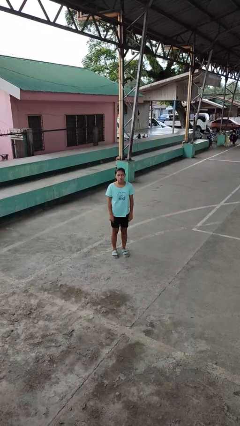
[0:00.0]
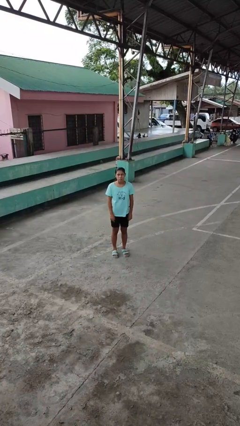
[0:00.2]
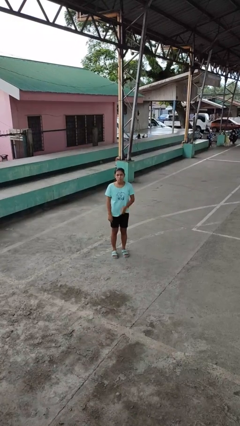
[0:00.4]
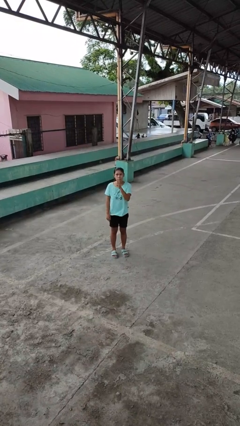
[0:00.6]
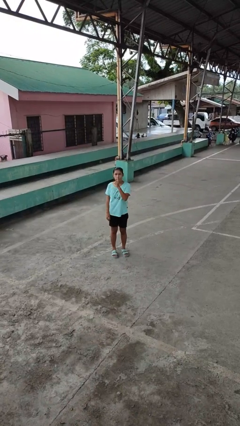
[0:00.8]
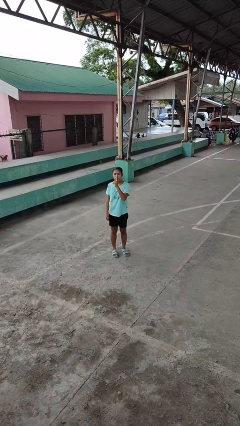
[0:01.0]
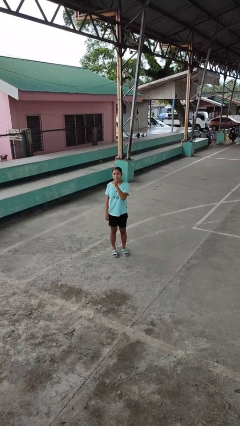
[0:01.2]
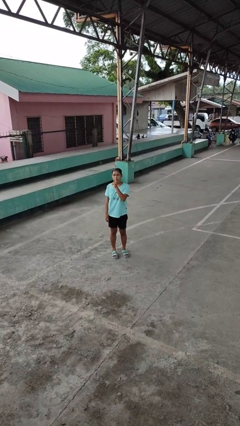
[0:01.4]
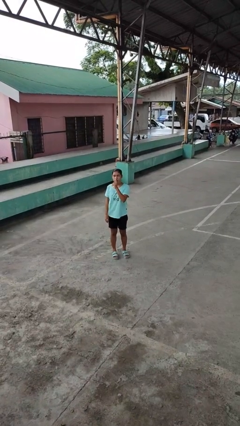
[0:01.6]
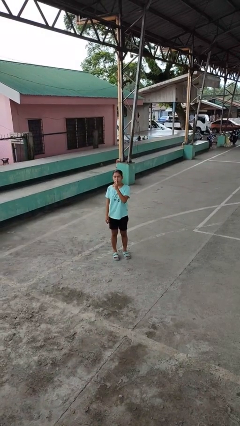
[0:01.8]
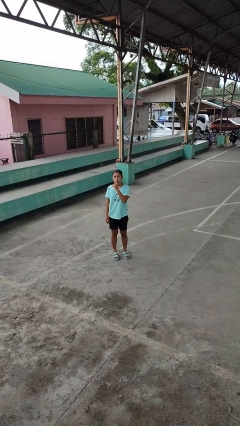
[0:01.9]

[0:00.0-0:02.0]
person gestures be quiet

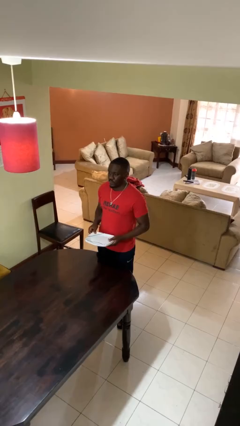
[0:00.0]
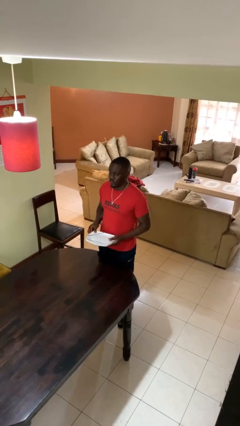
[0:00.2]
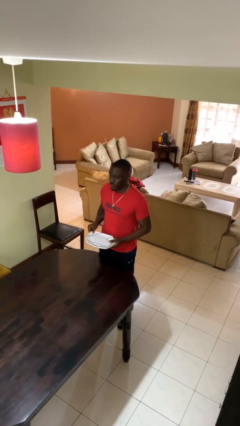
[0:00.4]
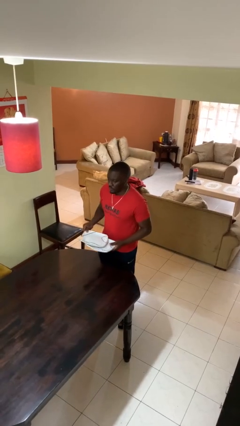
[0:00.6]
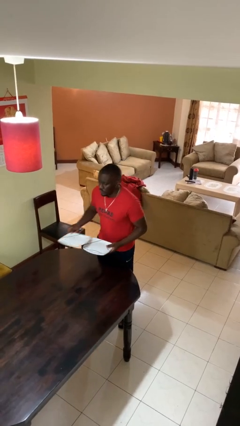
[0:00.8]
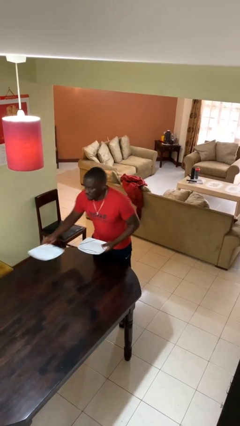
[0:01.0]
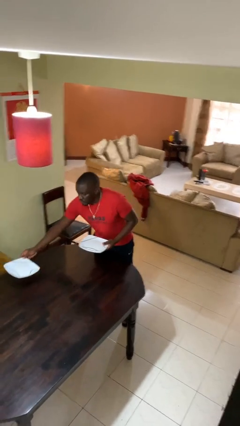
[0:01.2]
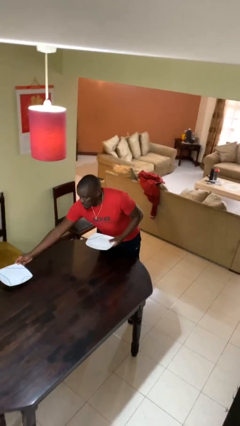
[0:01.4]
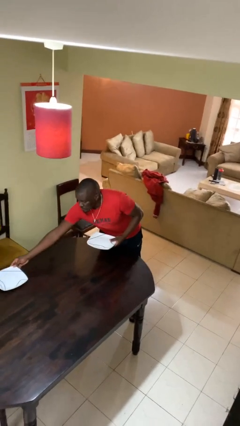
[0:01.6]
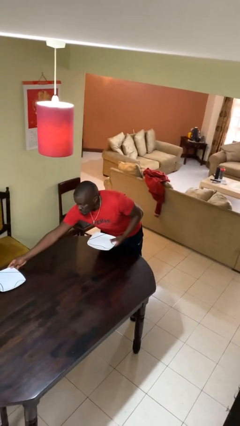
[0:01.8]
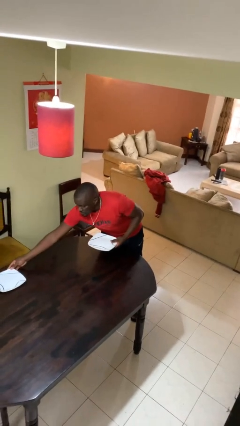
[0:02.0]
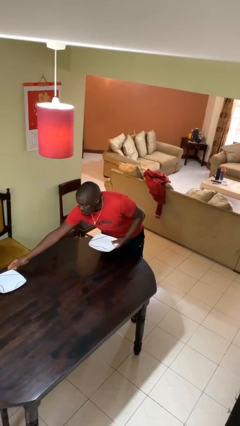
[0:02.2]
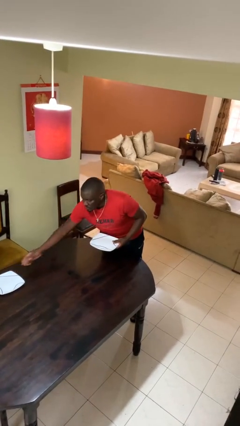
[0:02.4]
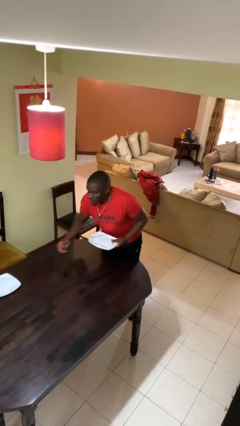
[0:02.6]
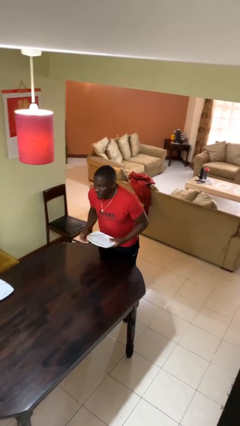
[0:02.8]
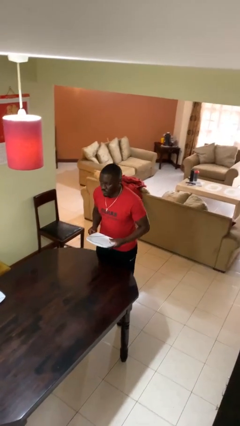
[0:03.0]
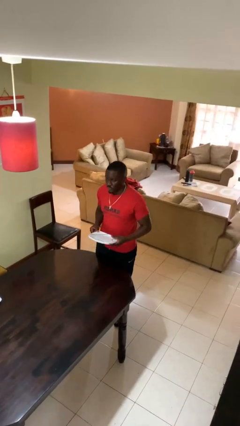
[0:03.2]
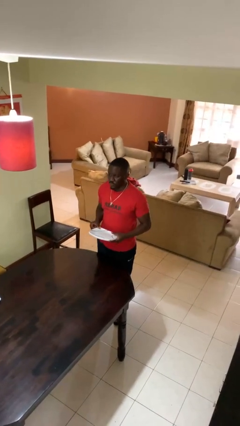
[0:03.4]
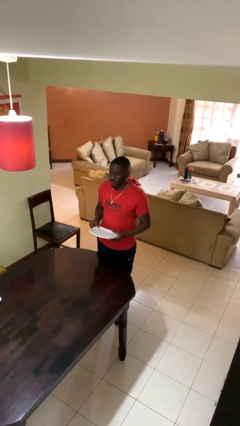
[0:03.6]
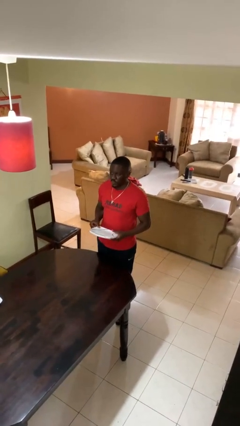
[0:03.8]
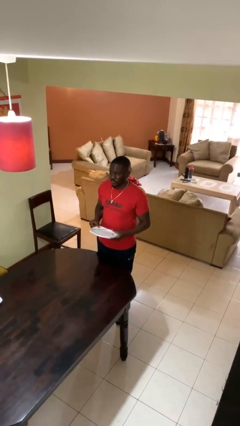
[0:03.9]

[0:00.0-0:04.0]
person sets table

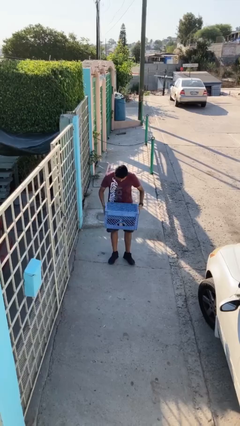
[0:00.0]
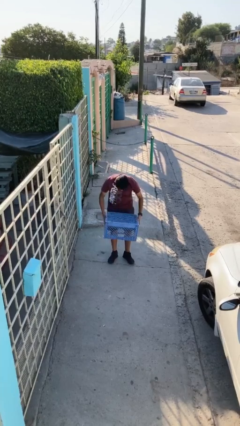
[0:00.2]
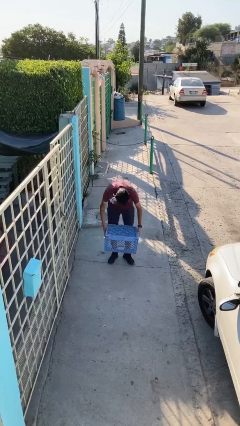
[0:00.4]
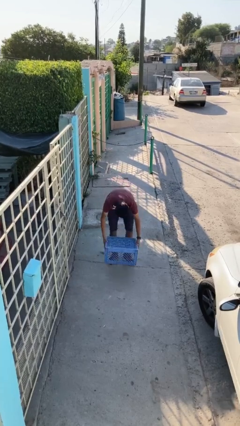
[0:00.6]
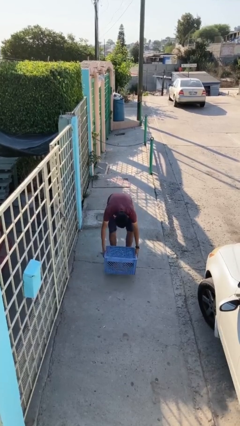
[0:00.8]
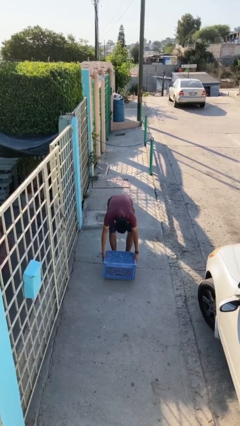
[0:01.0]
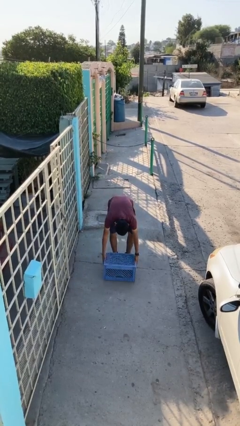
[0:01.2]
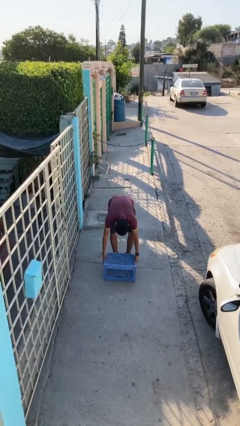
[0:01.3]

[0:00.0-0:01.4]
person puts down object on floor

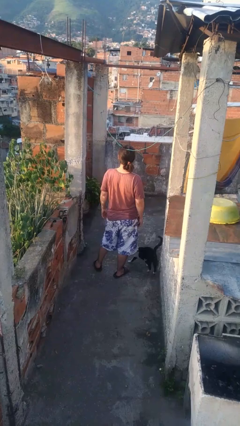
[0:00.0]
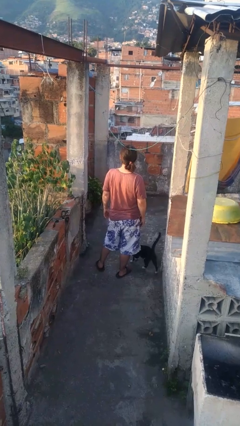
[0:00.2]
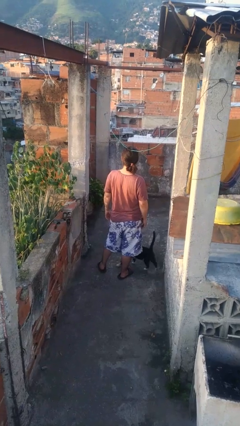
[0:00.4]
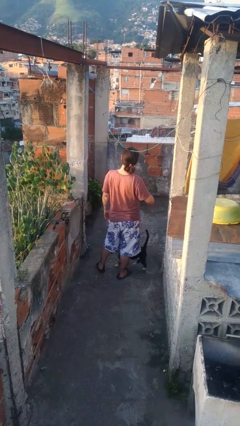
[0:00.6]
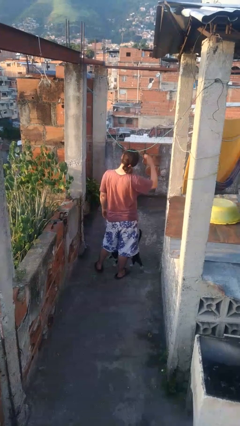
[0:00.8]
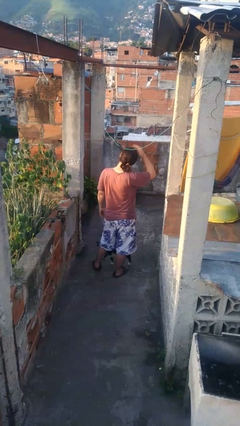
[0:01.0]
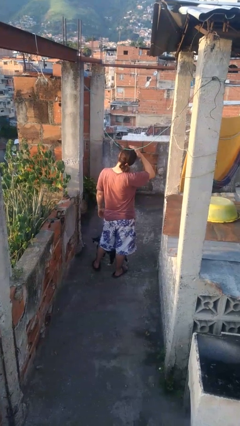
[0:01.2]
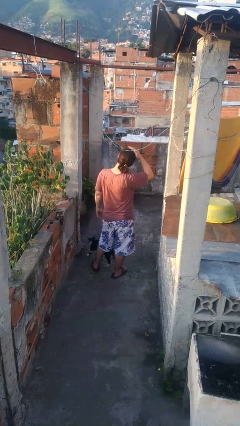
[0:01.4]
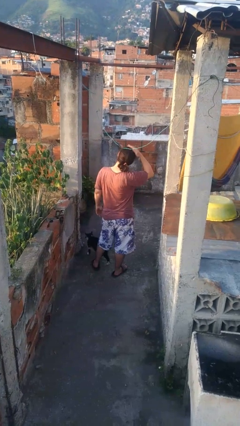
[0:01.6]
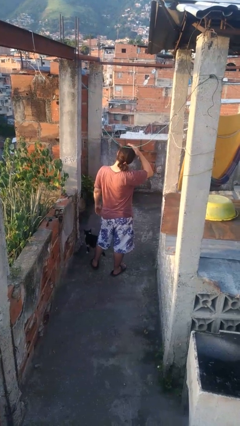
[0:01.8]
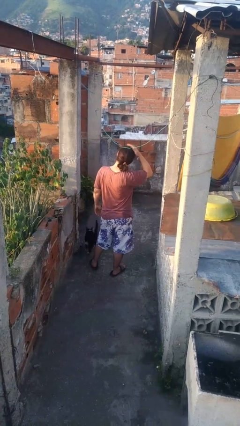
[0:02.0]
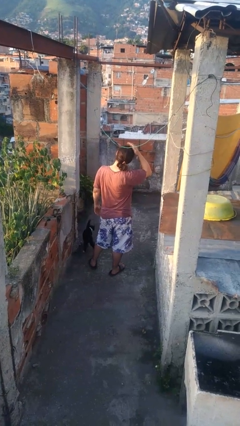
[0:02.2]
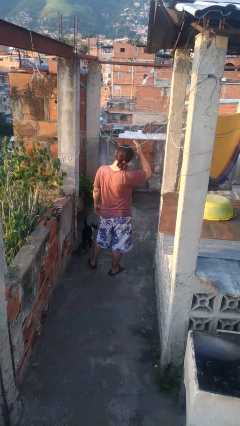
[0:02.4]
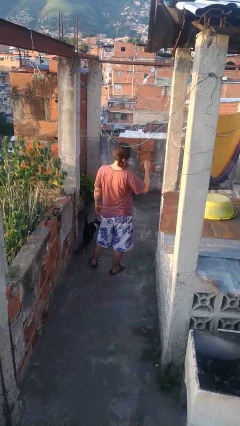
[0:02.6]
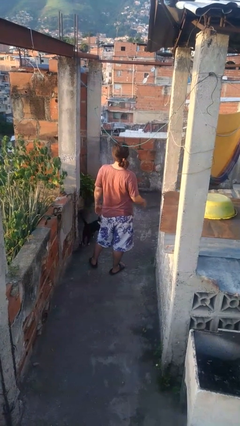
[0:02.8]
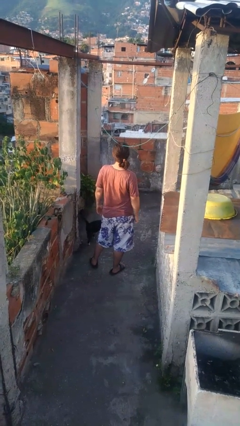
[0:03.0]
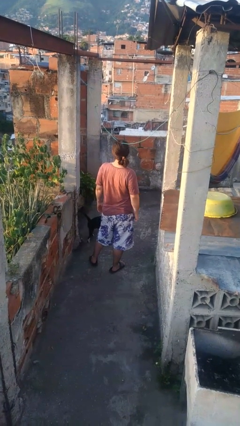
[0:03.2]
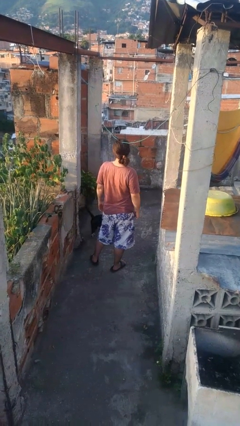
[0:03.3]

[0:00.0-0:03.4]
person pats head

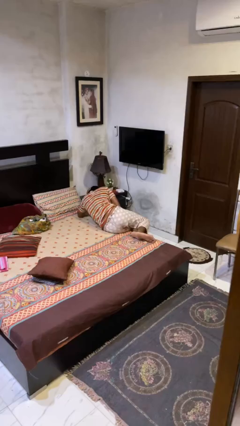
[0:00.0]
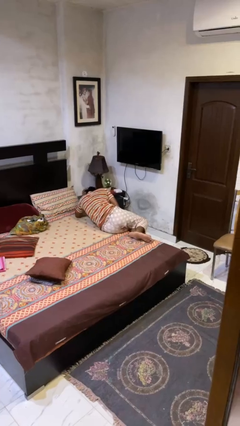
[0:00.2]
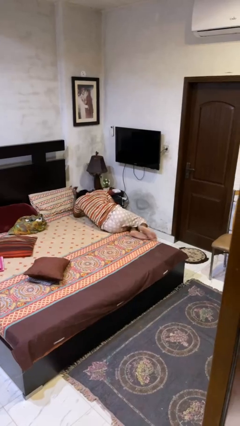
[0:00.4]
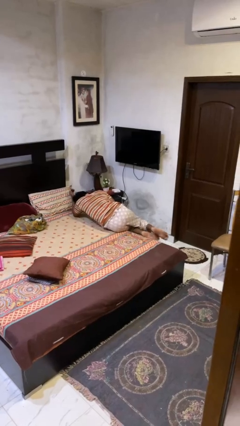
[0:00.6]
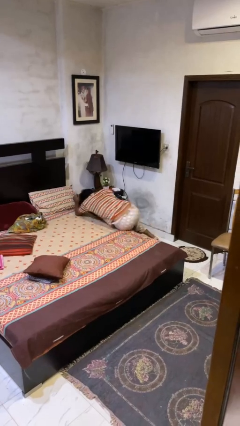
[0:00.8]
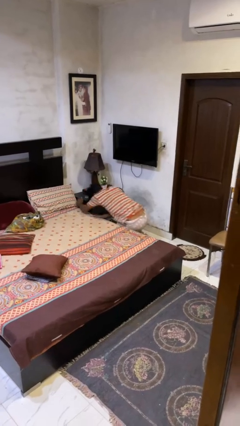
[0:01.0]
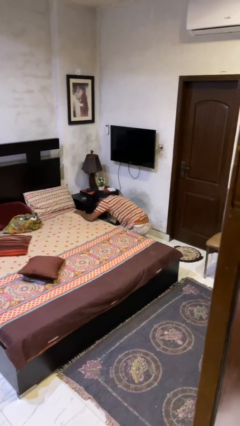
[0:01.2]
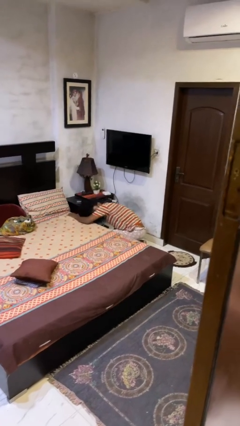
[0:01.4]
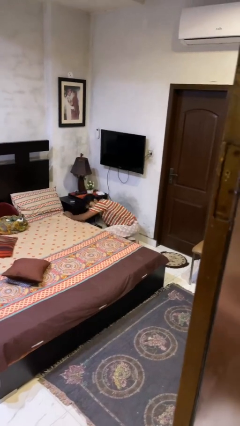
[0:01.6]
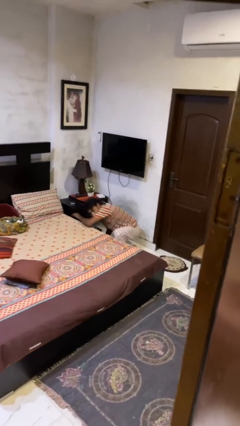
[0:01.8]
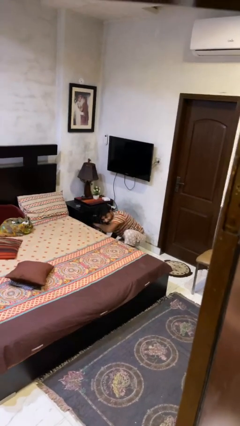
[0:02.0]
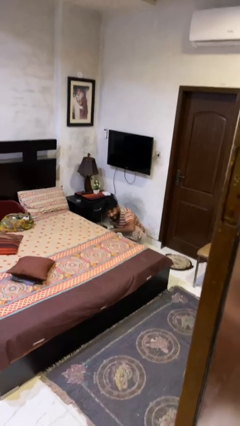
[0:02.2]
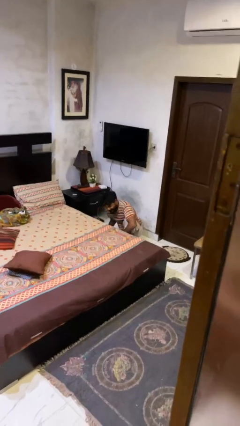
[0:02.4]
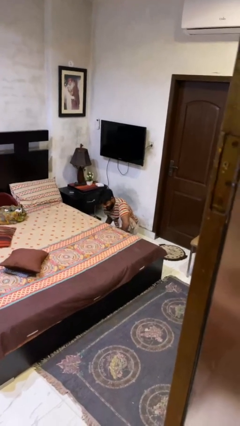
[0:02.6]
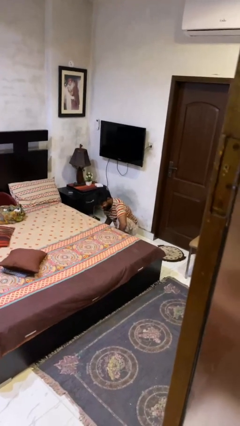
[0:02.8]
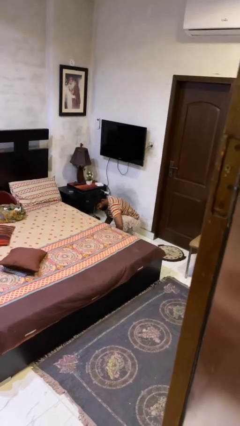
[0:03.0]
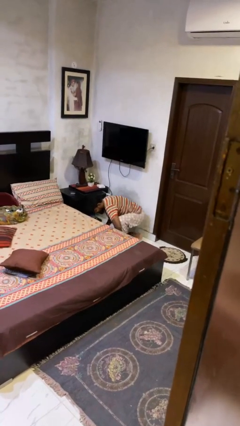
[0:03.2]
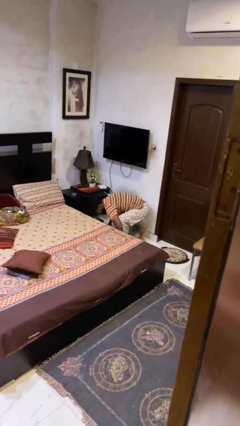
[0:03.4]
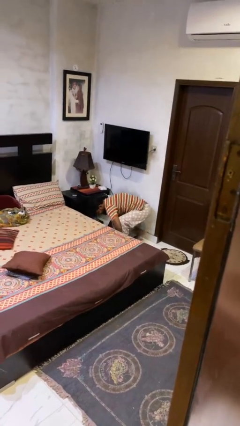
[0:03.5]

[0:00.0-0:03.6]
person falls from bed

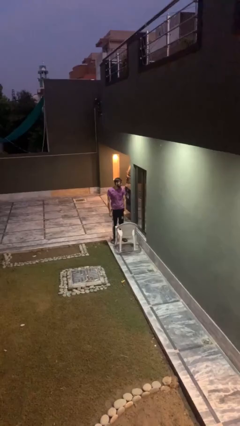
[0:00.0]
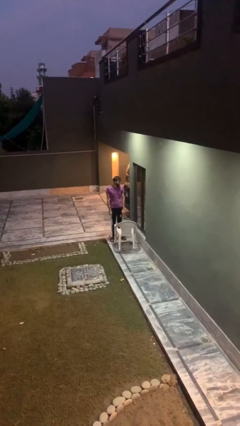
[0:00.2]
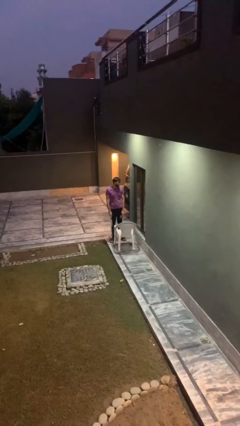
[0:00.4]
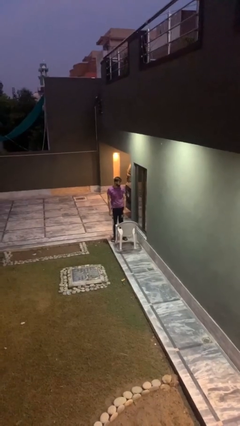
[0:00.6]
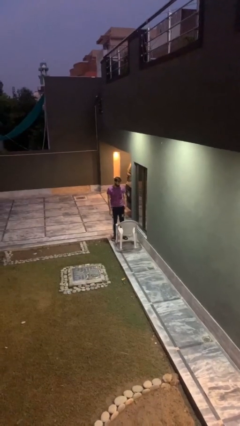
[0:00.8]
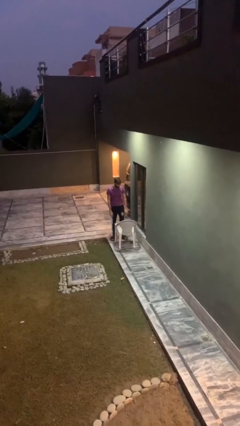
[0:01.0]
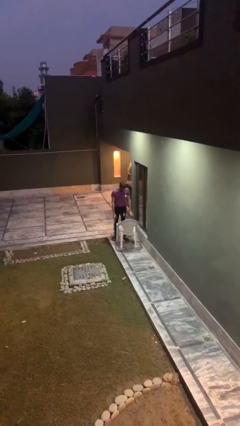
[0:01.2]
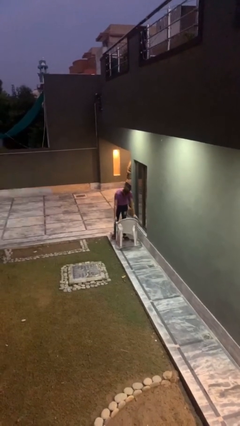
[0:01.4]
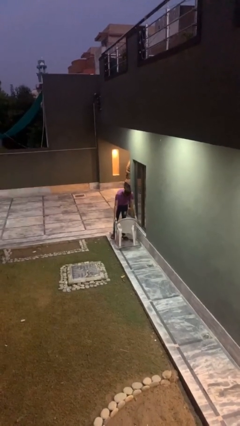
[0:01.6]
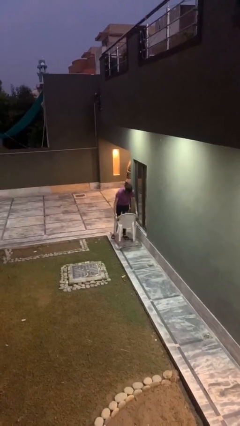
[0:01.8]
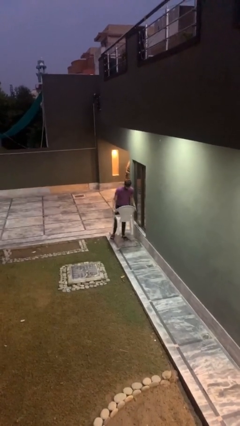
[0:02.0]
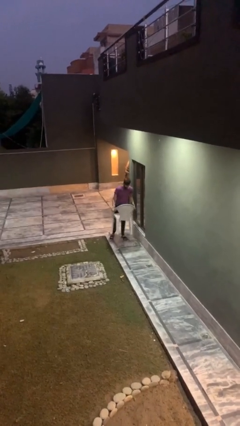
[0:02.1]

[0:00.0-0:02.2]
person picks up object from floor

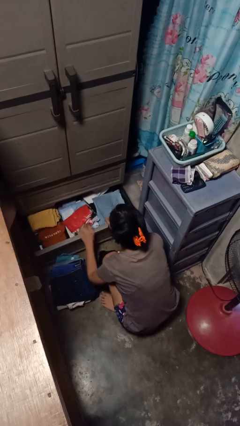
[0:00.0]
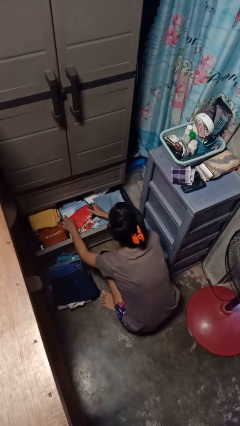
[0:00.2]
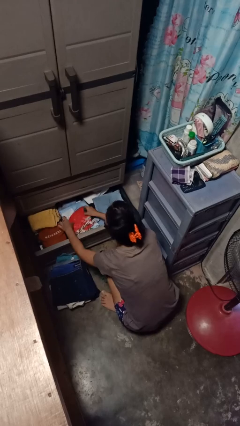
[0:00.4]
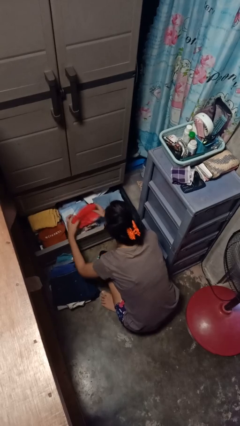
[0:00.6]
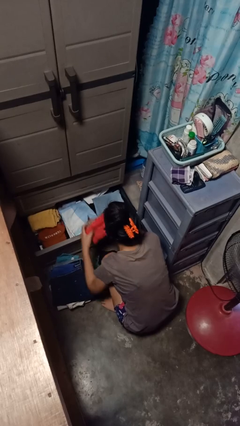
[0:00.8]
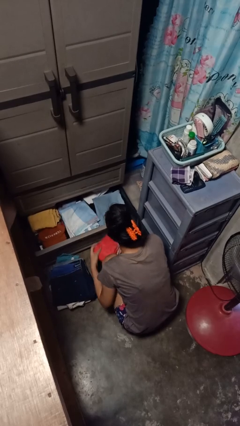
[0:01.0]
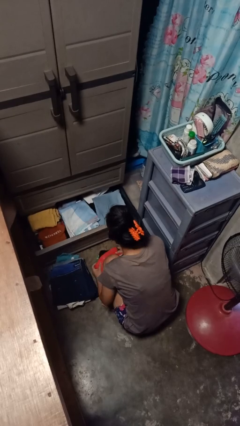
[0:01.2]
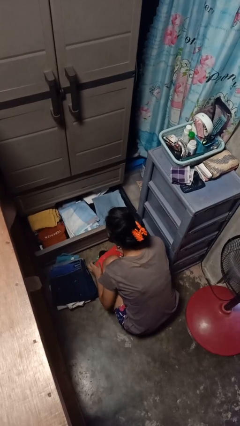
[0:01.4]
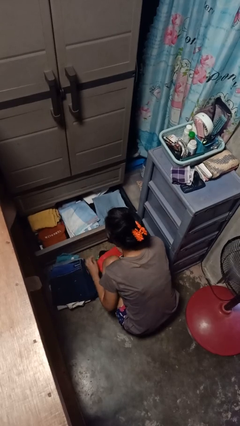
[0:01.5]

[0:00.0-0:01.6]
person takes clothes from dresser
